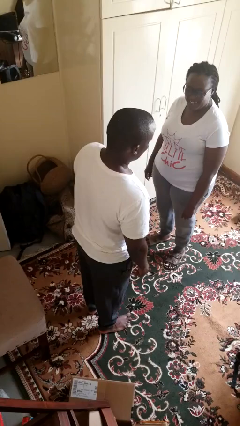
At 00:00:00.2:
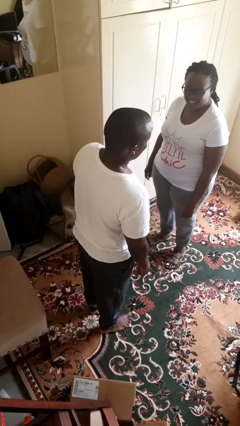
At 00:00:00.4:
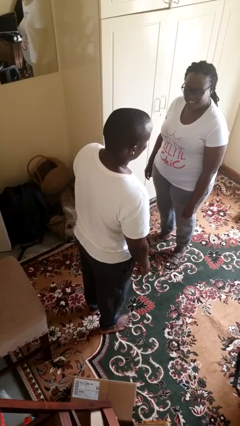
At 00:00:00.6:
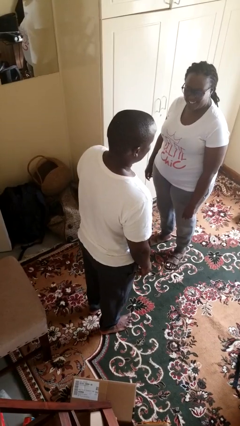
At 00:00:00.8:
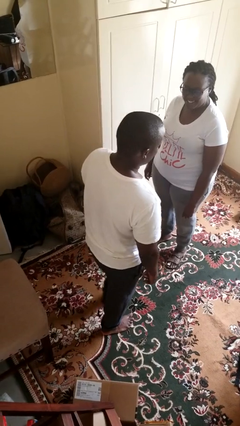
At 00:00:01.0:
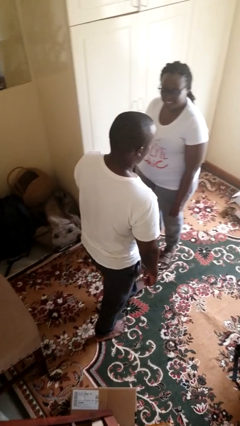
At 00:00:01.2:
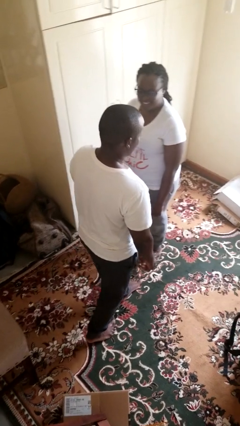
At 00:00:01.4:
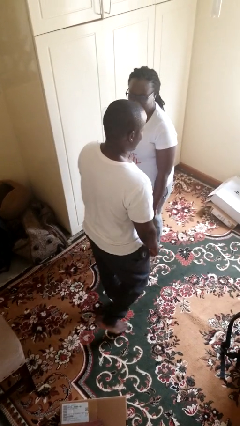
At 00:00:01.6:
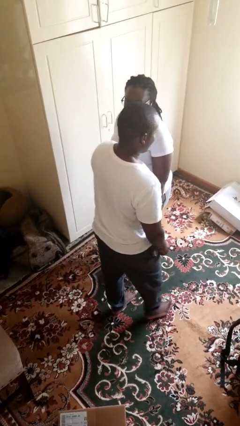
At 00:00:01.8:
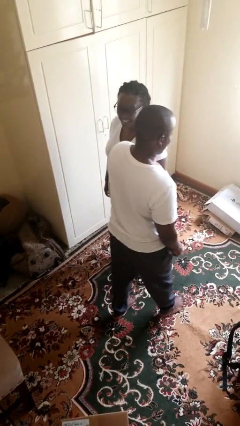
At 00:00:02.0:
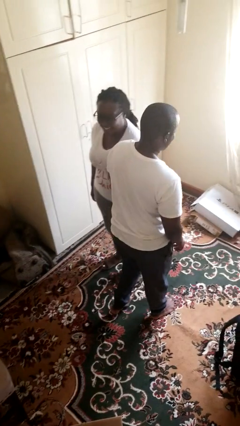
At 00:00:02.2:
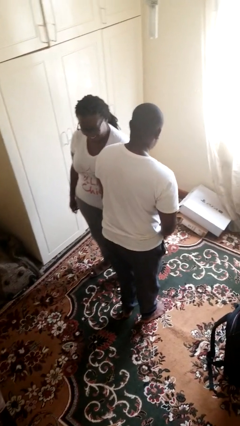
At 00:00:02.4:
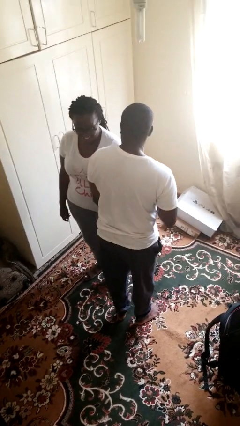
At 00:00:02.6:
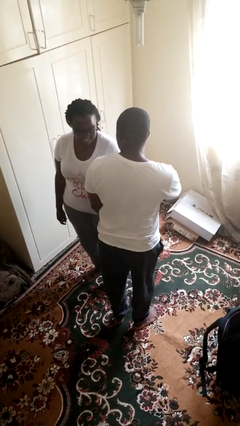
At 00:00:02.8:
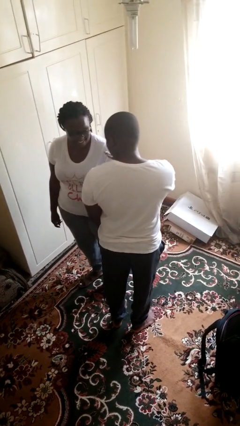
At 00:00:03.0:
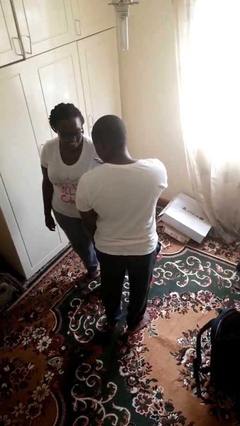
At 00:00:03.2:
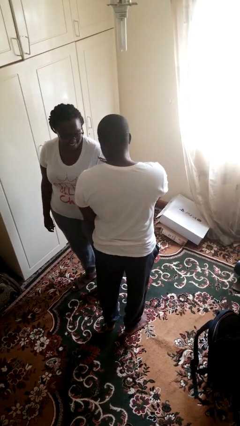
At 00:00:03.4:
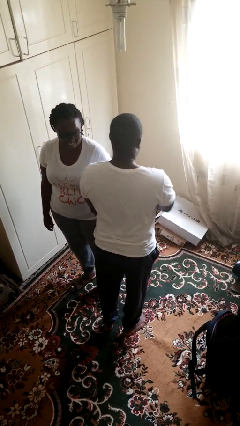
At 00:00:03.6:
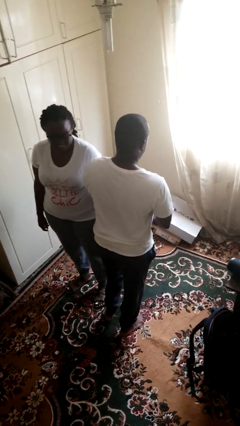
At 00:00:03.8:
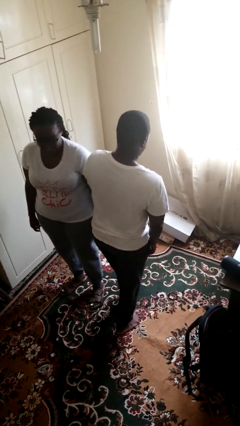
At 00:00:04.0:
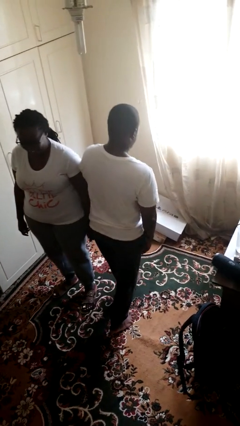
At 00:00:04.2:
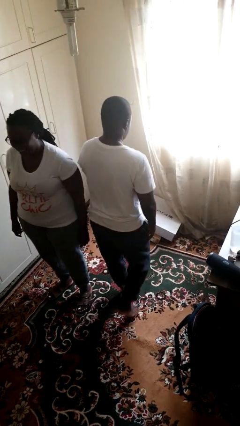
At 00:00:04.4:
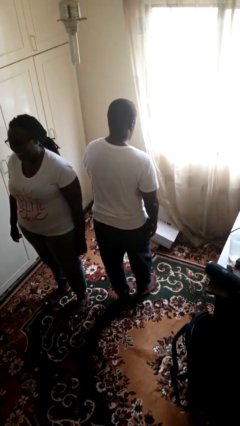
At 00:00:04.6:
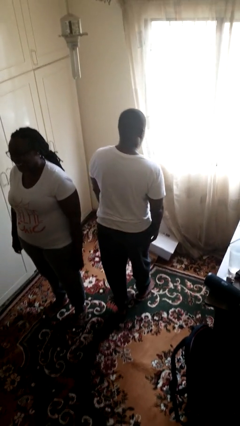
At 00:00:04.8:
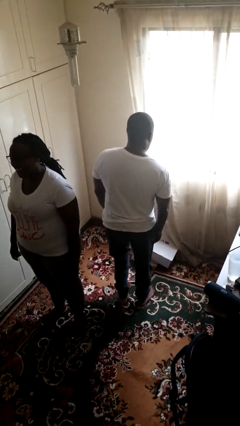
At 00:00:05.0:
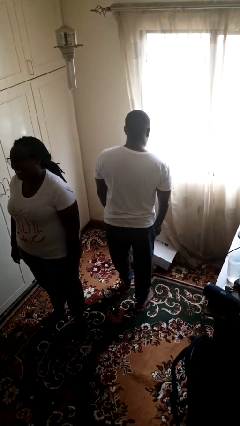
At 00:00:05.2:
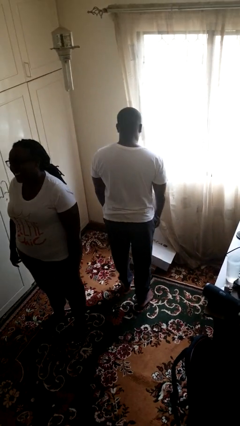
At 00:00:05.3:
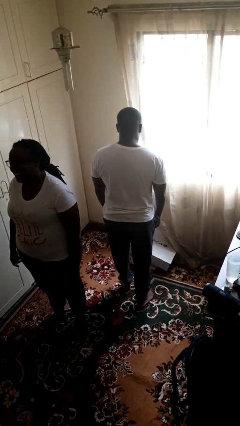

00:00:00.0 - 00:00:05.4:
person bumps into person

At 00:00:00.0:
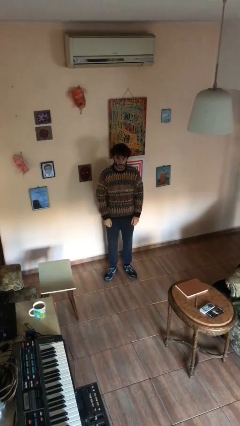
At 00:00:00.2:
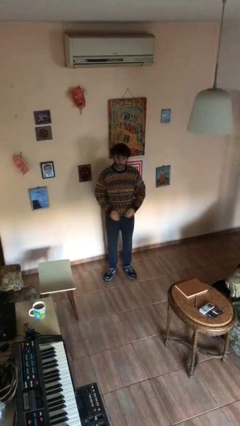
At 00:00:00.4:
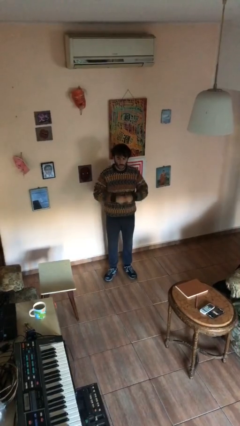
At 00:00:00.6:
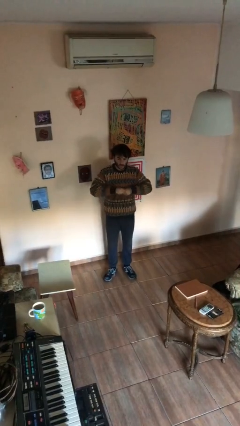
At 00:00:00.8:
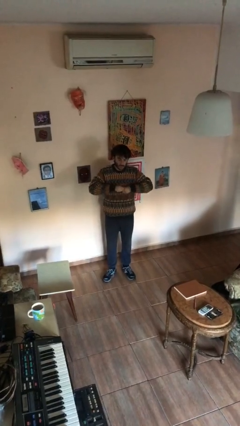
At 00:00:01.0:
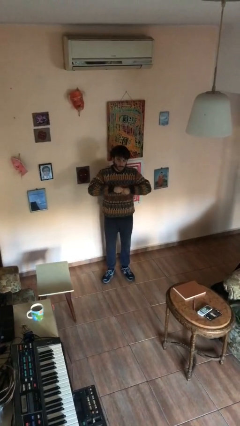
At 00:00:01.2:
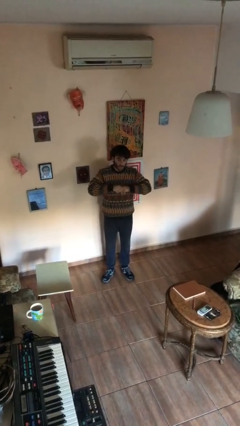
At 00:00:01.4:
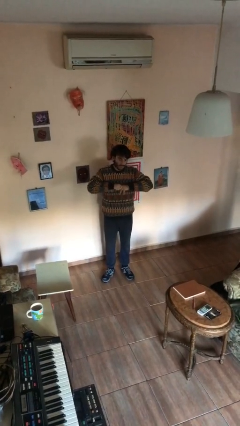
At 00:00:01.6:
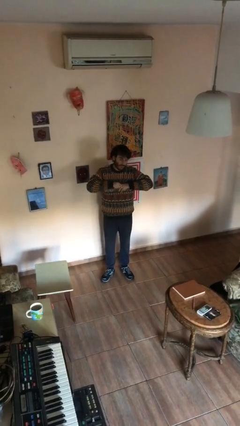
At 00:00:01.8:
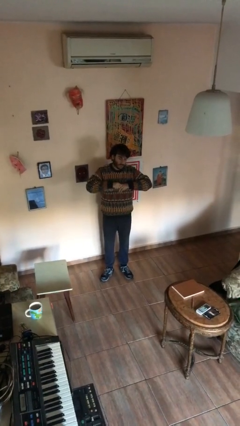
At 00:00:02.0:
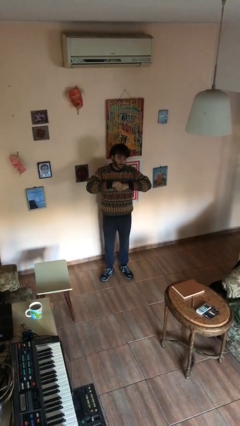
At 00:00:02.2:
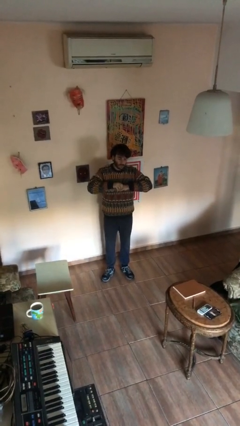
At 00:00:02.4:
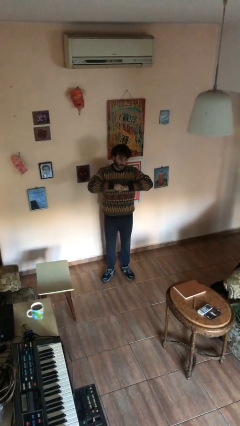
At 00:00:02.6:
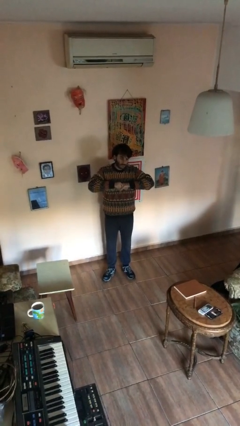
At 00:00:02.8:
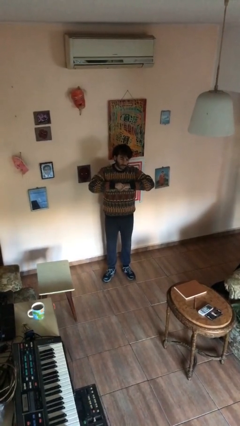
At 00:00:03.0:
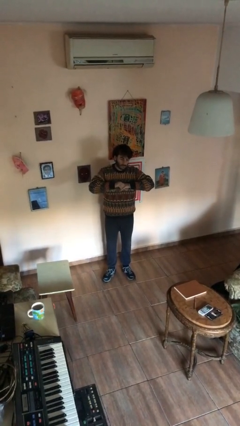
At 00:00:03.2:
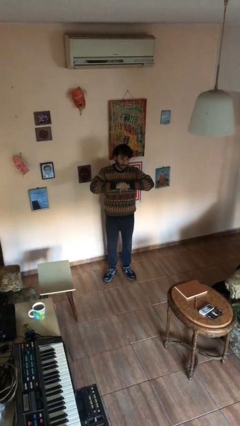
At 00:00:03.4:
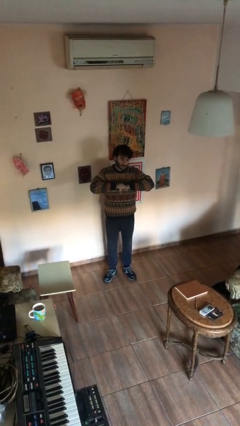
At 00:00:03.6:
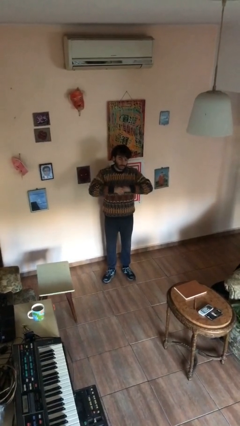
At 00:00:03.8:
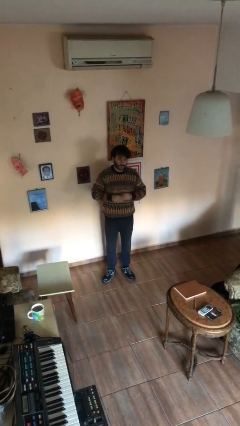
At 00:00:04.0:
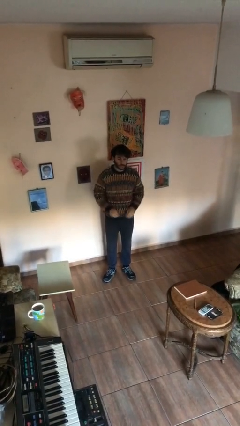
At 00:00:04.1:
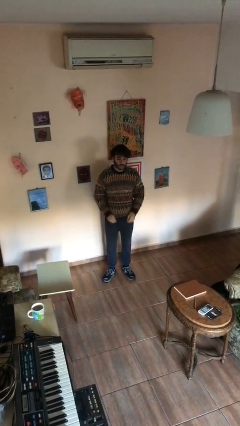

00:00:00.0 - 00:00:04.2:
person cracks knuckles

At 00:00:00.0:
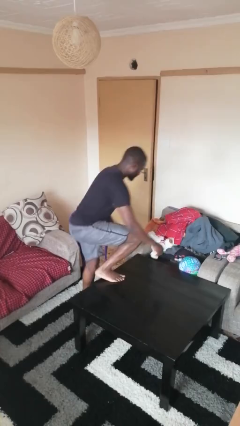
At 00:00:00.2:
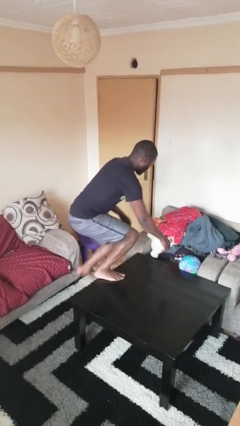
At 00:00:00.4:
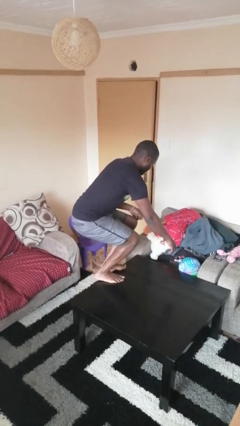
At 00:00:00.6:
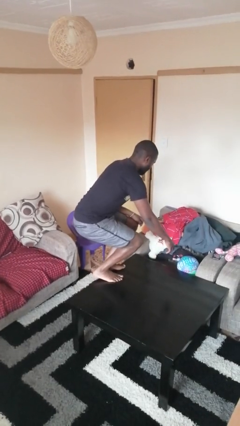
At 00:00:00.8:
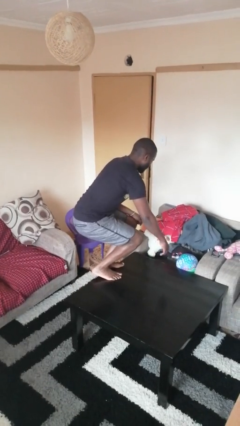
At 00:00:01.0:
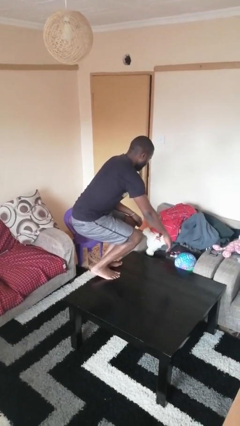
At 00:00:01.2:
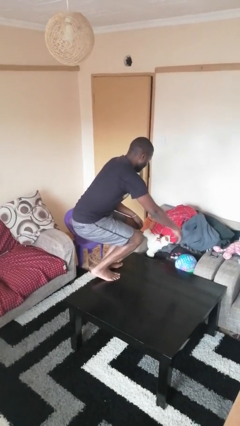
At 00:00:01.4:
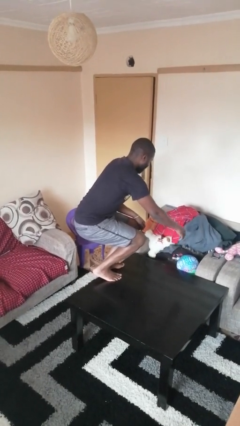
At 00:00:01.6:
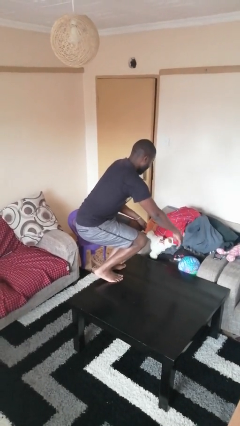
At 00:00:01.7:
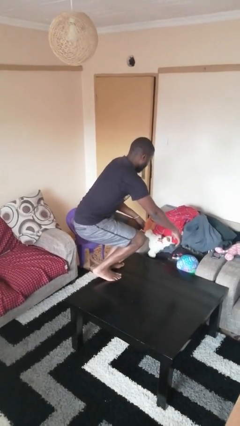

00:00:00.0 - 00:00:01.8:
person climbs on table

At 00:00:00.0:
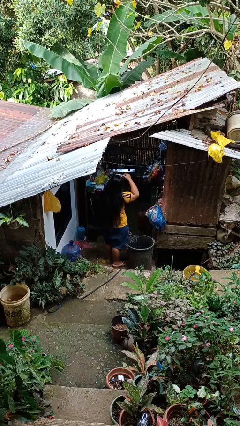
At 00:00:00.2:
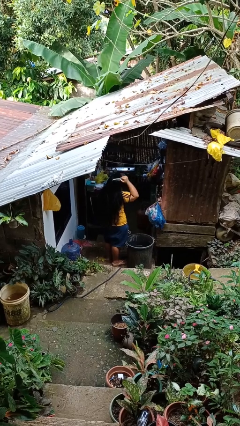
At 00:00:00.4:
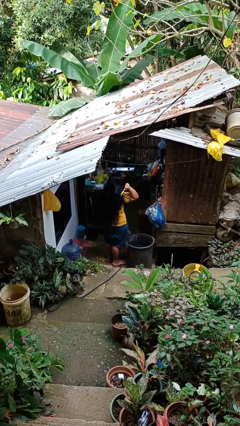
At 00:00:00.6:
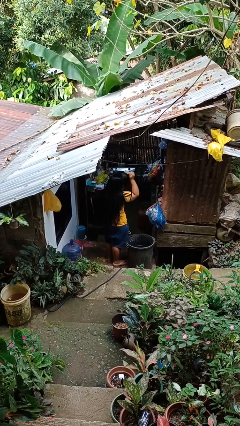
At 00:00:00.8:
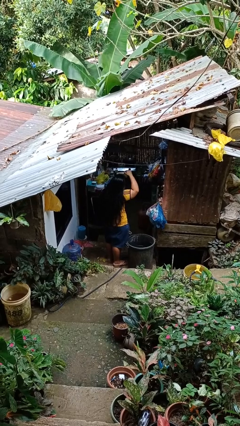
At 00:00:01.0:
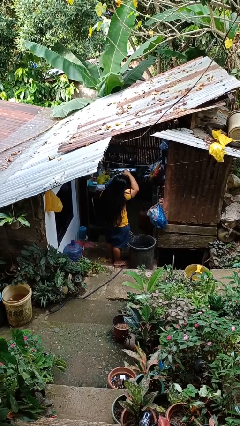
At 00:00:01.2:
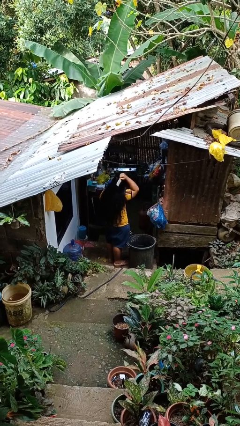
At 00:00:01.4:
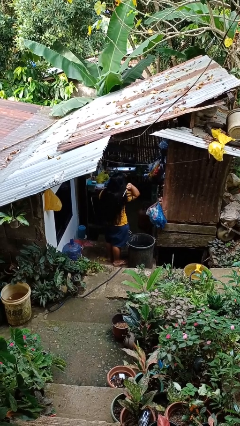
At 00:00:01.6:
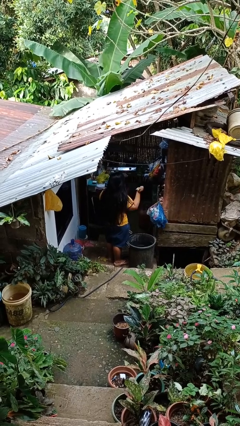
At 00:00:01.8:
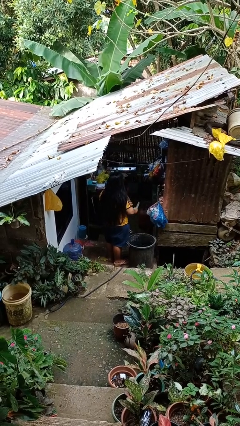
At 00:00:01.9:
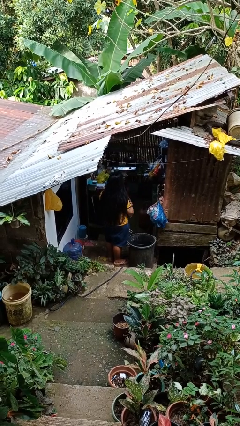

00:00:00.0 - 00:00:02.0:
person brushes hair

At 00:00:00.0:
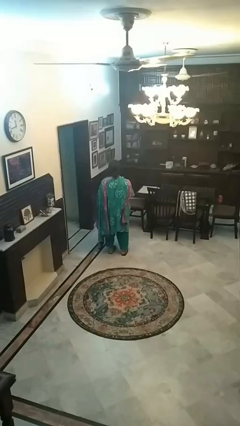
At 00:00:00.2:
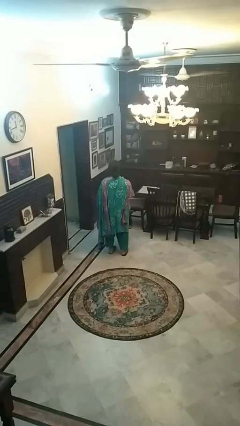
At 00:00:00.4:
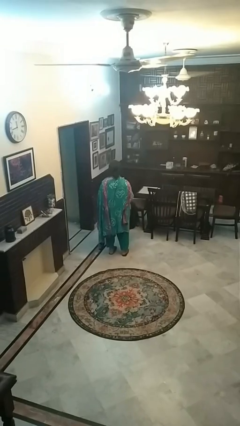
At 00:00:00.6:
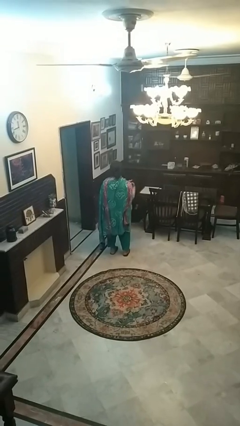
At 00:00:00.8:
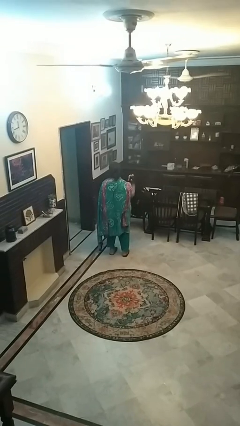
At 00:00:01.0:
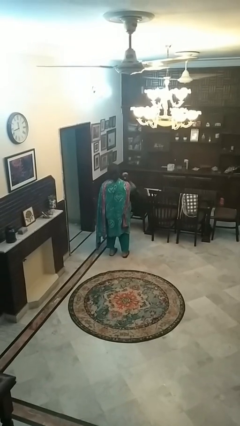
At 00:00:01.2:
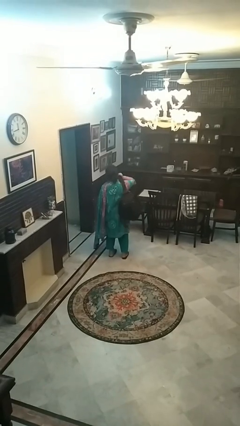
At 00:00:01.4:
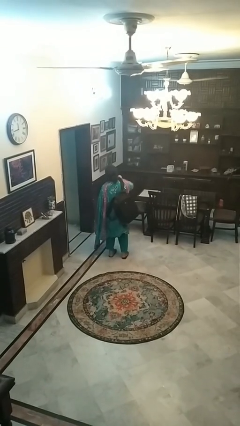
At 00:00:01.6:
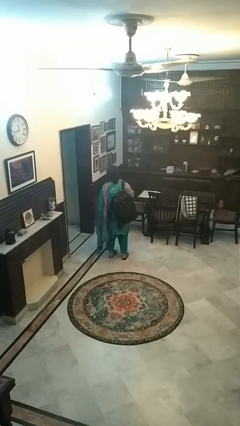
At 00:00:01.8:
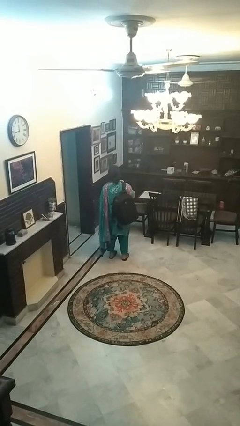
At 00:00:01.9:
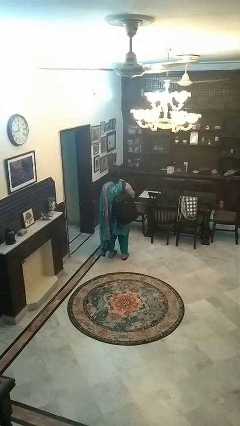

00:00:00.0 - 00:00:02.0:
person puts on backpack

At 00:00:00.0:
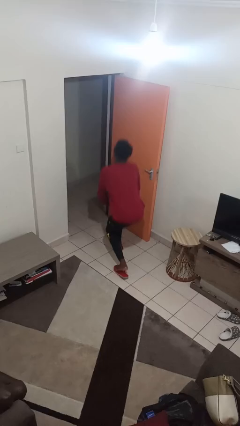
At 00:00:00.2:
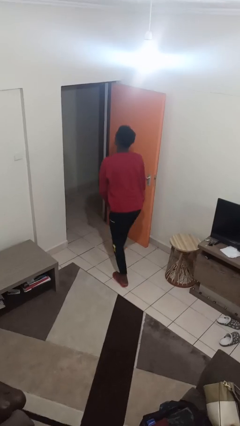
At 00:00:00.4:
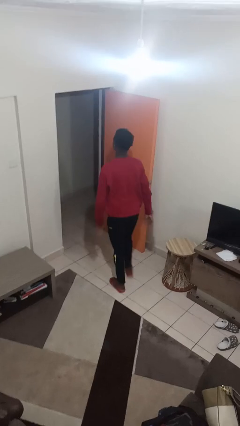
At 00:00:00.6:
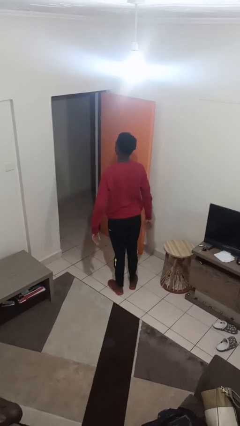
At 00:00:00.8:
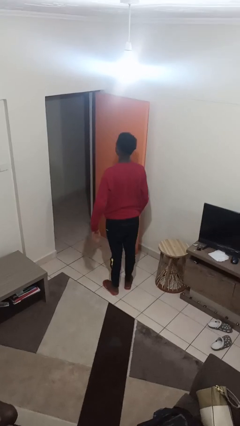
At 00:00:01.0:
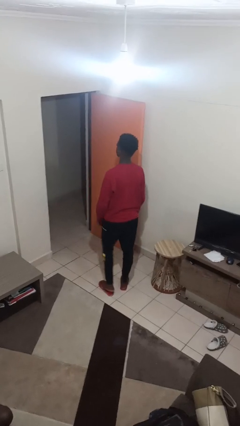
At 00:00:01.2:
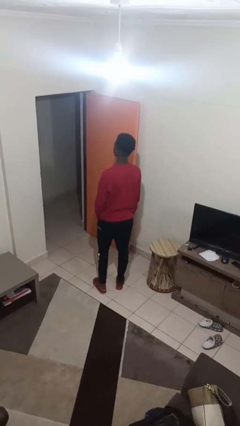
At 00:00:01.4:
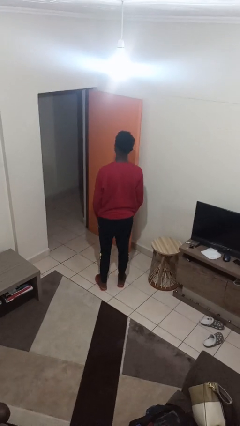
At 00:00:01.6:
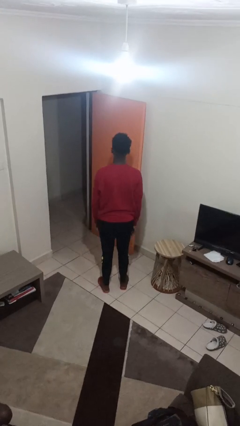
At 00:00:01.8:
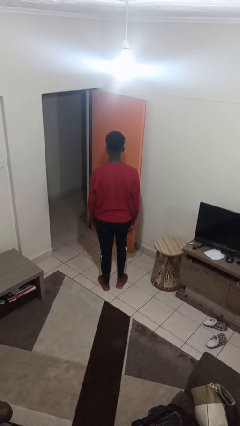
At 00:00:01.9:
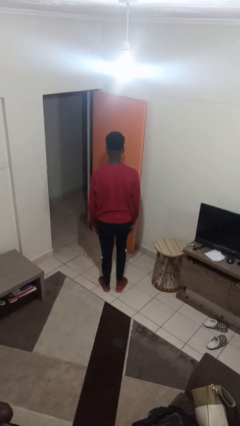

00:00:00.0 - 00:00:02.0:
person stands up from floor
